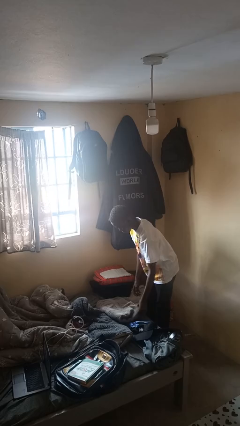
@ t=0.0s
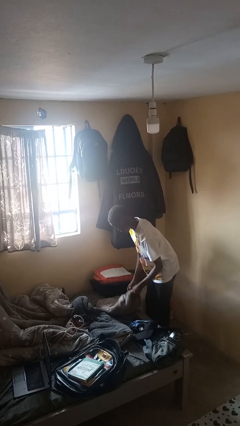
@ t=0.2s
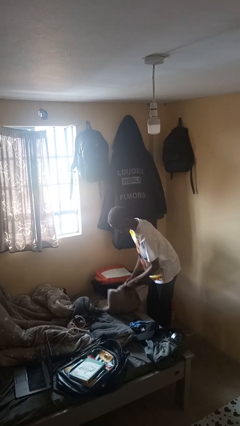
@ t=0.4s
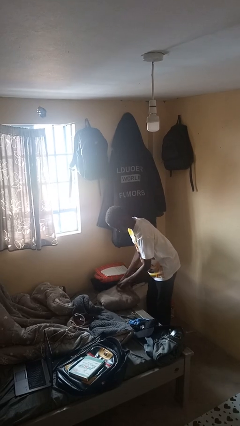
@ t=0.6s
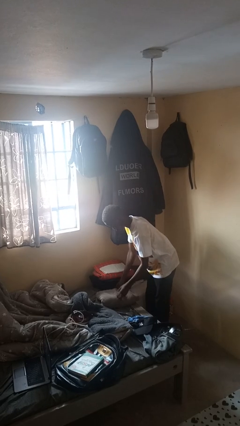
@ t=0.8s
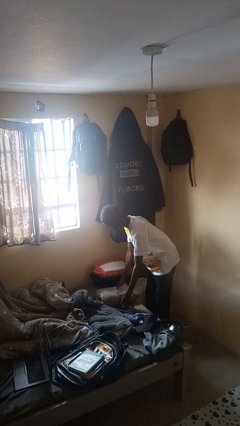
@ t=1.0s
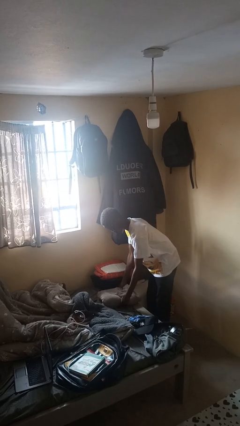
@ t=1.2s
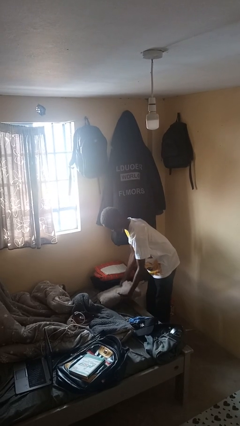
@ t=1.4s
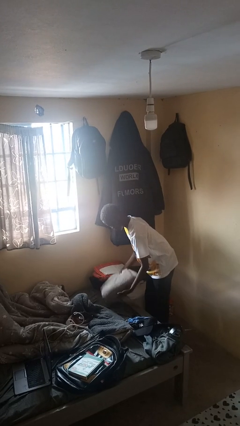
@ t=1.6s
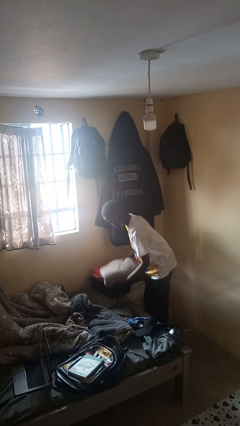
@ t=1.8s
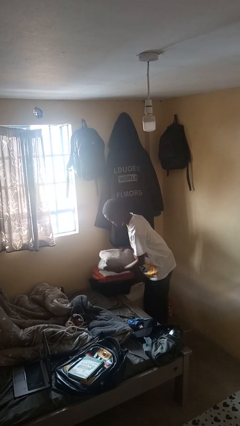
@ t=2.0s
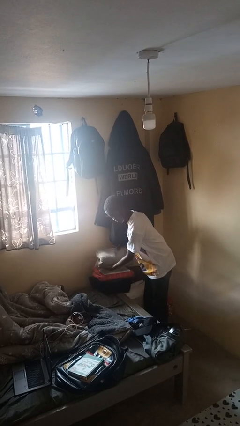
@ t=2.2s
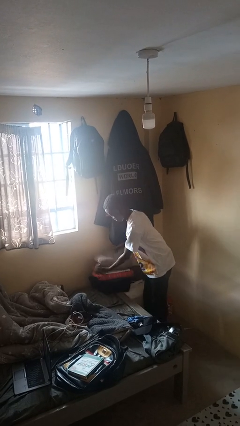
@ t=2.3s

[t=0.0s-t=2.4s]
person folds towel

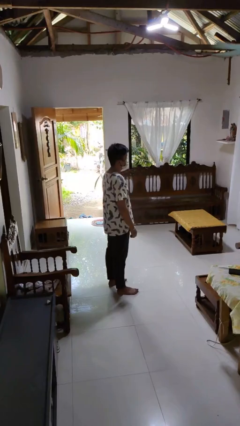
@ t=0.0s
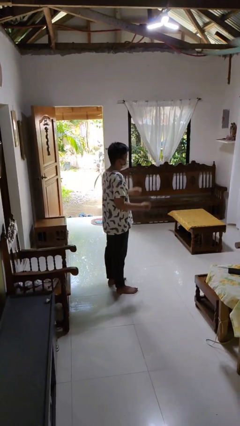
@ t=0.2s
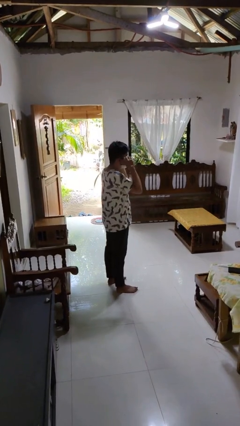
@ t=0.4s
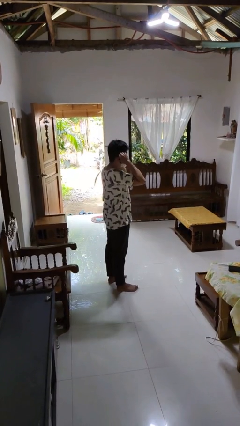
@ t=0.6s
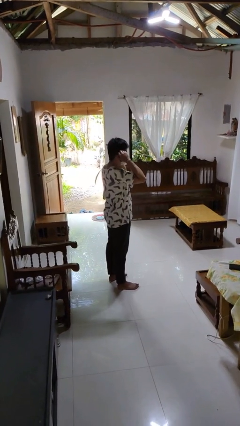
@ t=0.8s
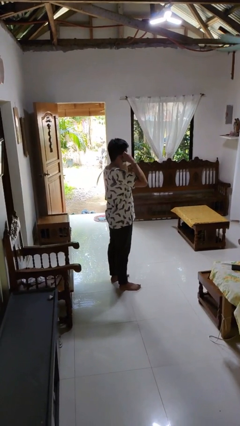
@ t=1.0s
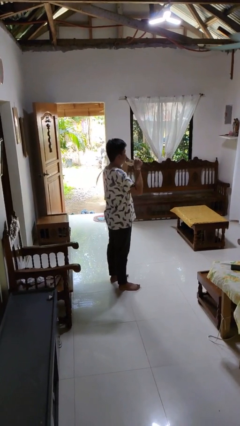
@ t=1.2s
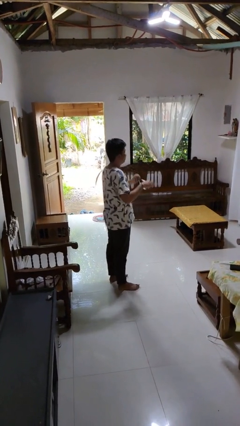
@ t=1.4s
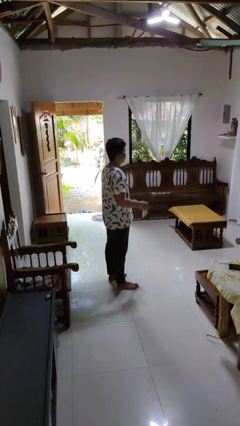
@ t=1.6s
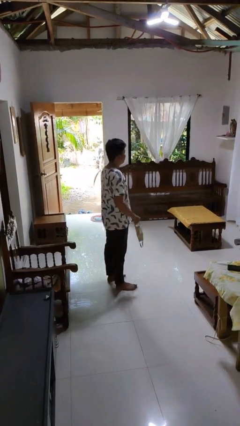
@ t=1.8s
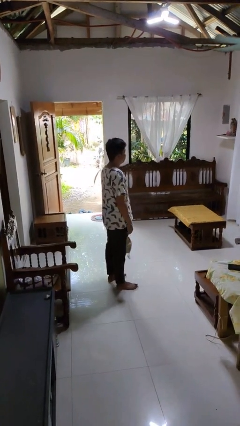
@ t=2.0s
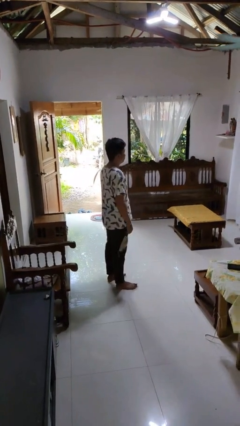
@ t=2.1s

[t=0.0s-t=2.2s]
person takes off facemask

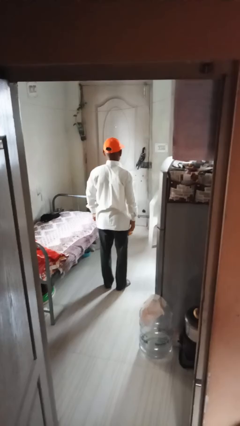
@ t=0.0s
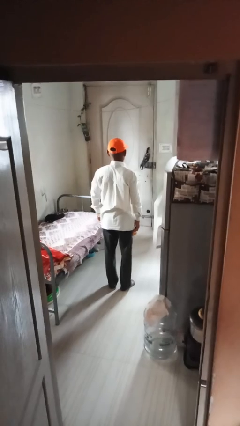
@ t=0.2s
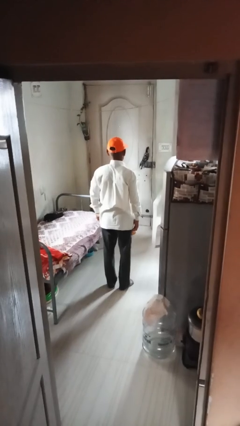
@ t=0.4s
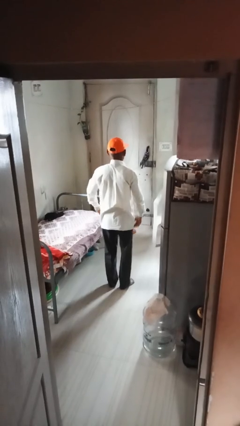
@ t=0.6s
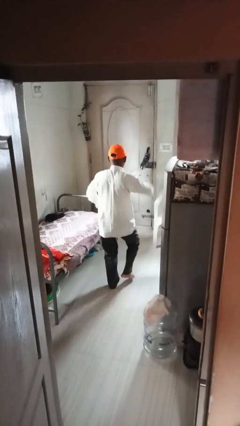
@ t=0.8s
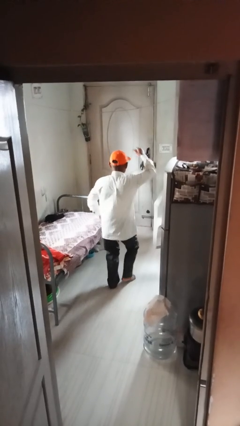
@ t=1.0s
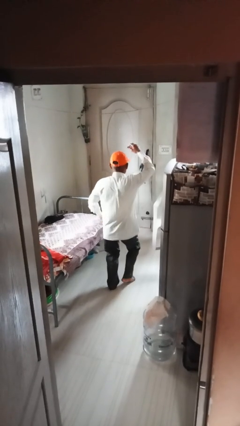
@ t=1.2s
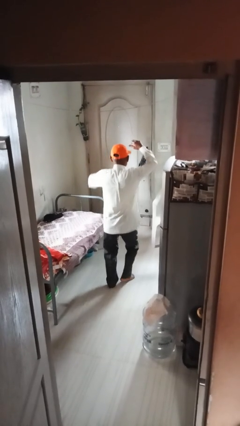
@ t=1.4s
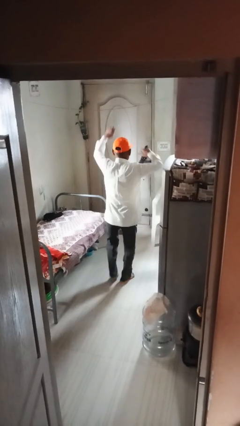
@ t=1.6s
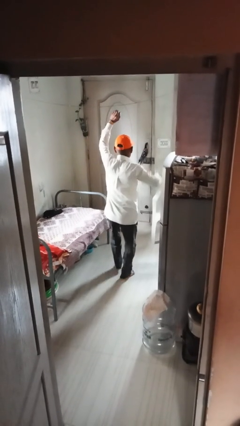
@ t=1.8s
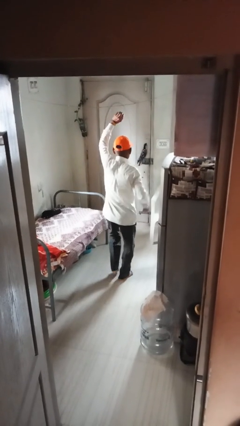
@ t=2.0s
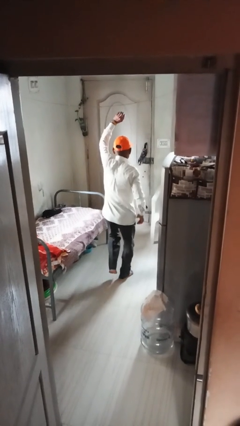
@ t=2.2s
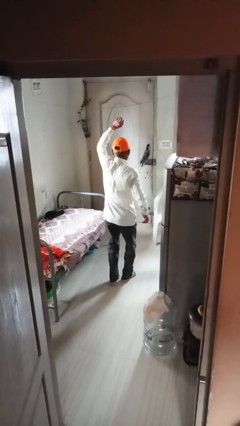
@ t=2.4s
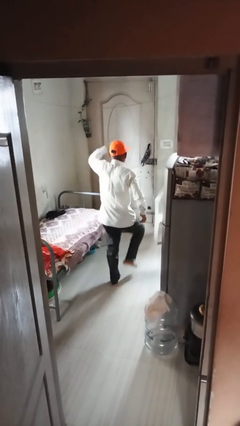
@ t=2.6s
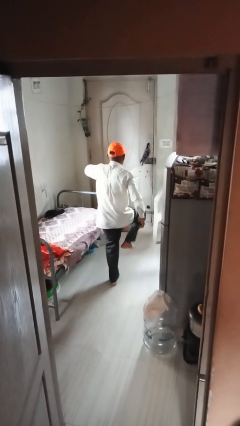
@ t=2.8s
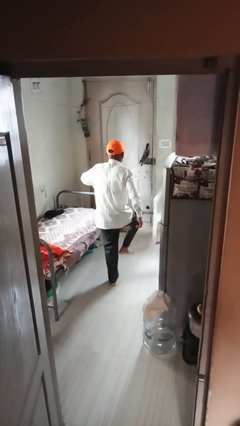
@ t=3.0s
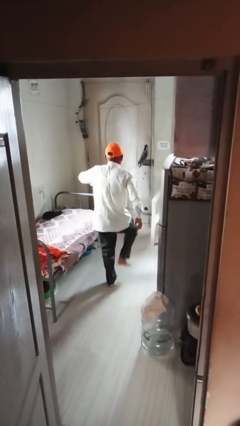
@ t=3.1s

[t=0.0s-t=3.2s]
person dances in place

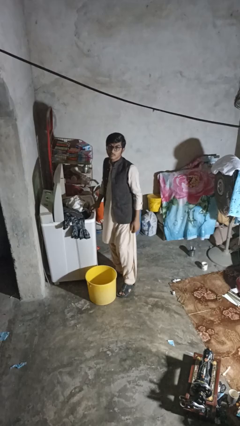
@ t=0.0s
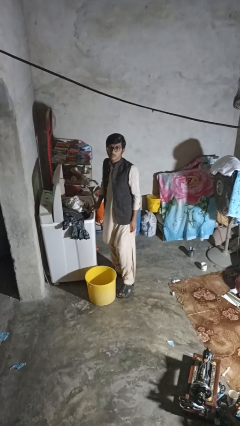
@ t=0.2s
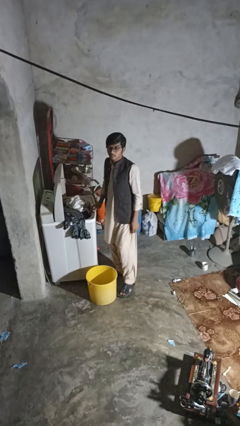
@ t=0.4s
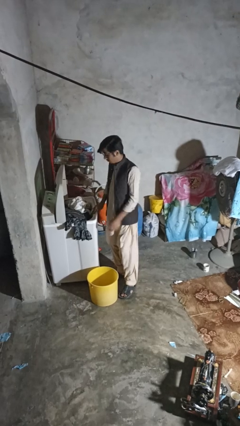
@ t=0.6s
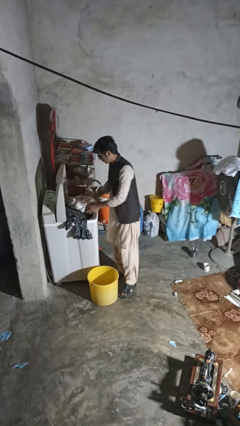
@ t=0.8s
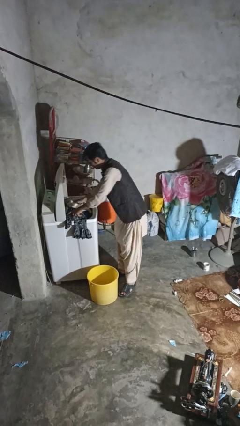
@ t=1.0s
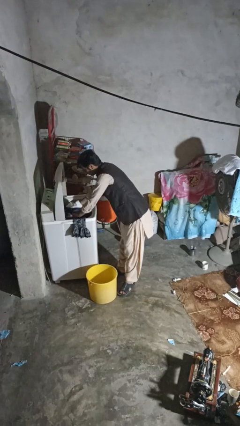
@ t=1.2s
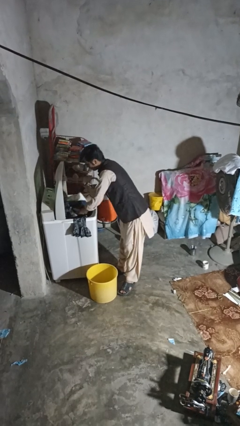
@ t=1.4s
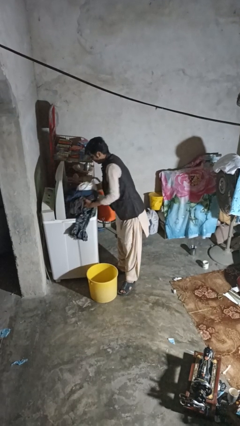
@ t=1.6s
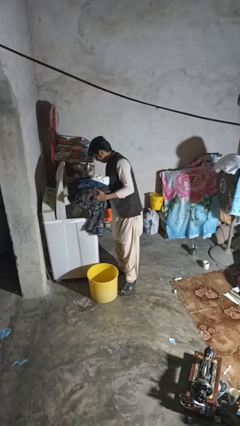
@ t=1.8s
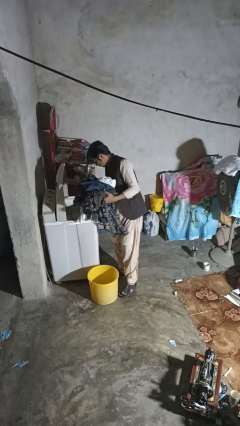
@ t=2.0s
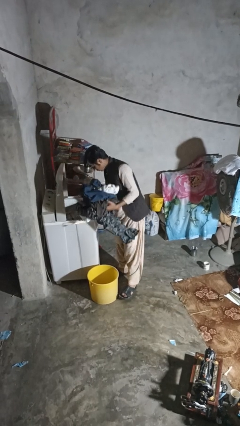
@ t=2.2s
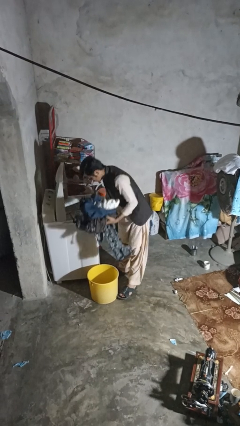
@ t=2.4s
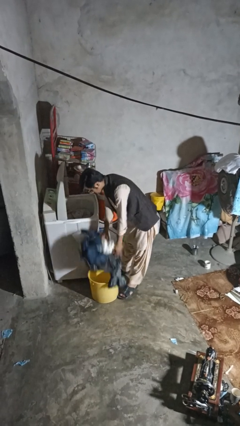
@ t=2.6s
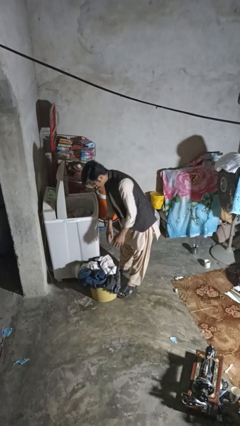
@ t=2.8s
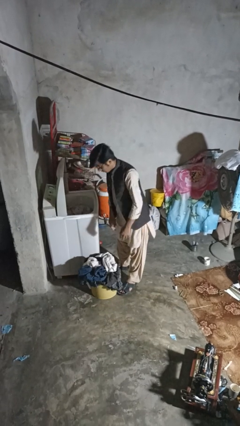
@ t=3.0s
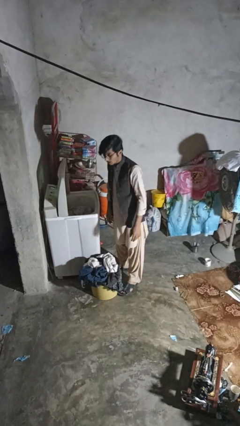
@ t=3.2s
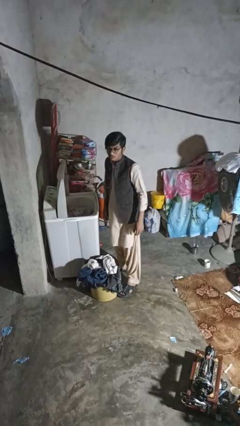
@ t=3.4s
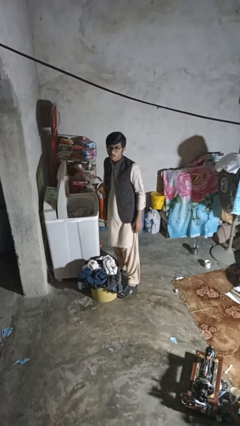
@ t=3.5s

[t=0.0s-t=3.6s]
person unloads dryer

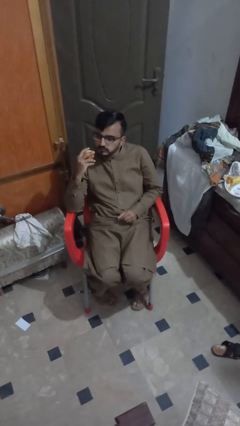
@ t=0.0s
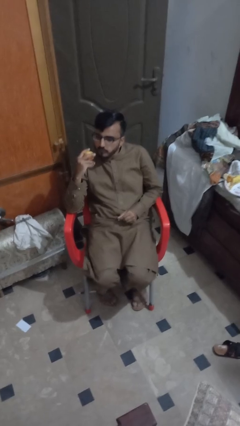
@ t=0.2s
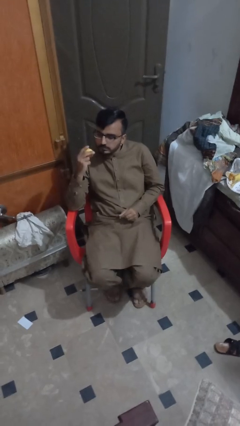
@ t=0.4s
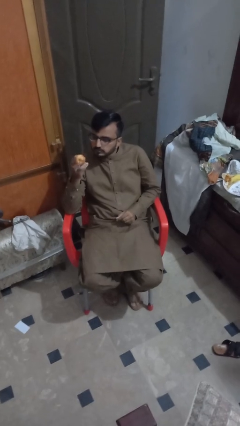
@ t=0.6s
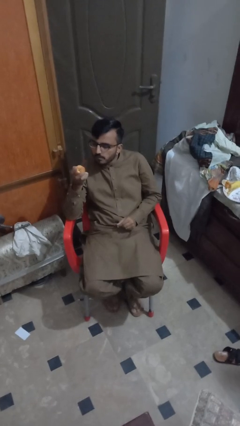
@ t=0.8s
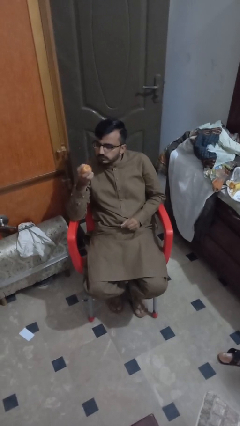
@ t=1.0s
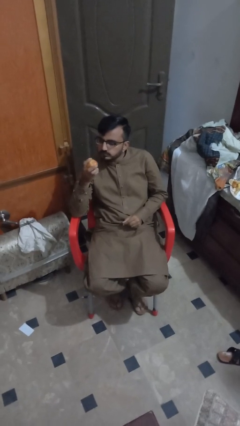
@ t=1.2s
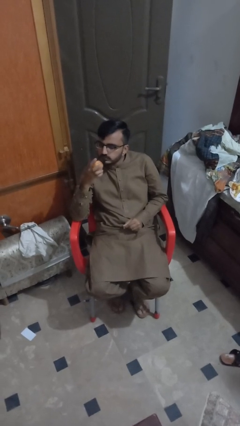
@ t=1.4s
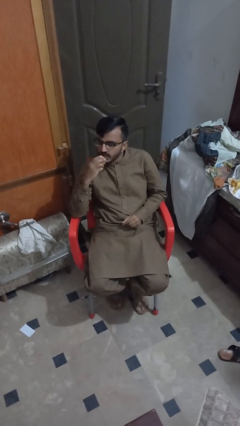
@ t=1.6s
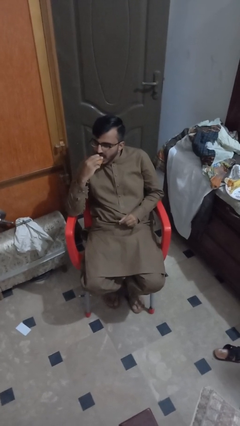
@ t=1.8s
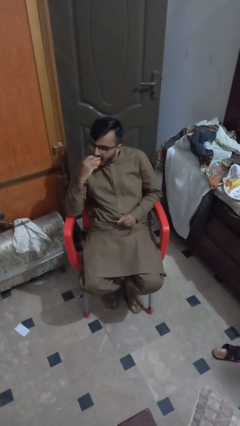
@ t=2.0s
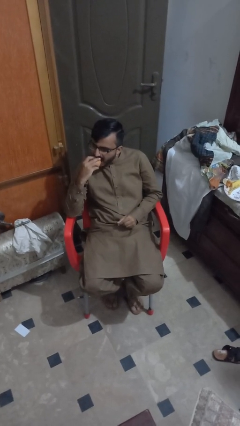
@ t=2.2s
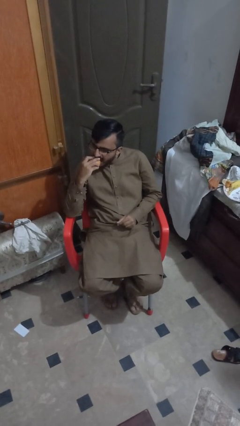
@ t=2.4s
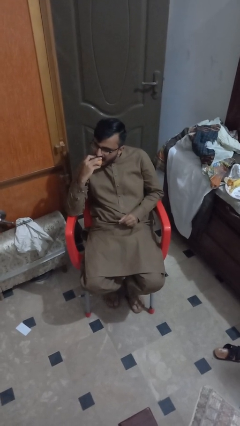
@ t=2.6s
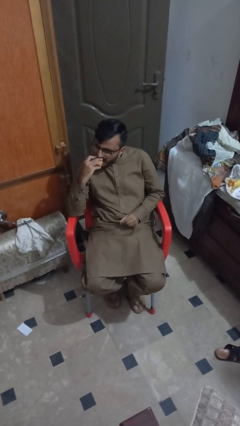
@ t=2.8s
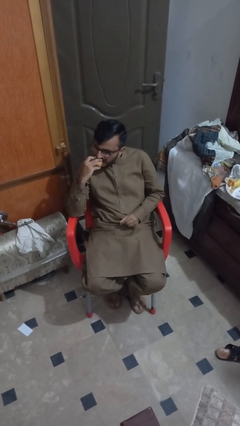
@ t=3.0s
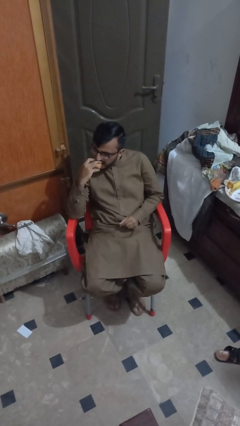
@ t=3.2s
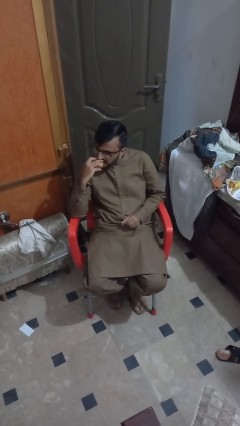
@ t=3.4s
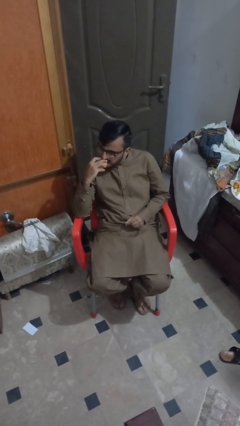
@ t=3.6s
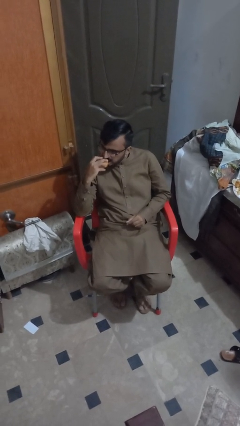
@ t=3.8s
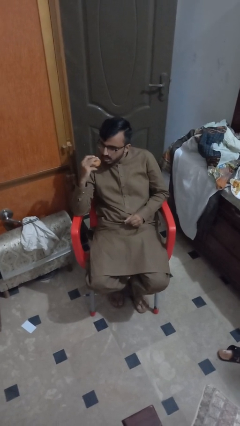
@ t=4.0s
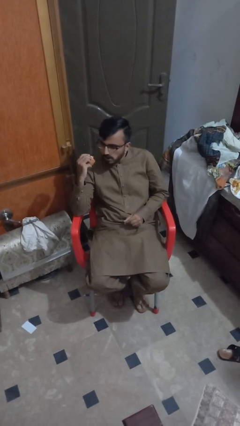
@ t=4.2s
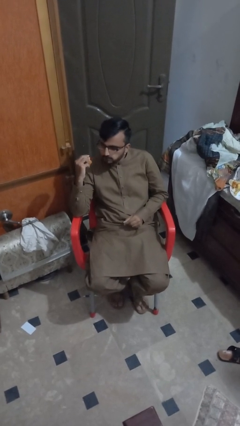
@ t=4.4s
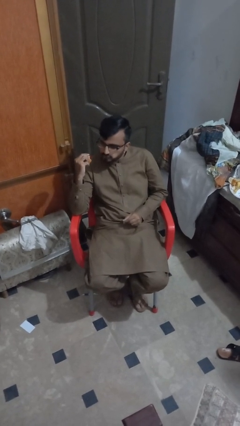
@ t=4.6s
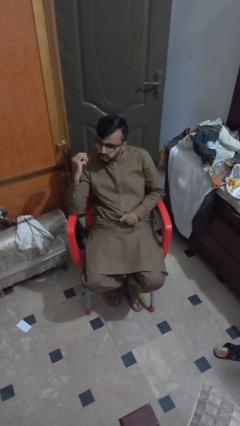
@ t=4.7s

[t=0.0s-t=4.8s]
person eats apple

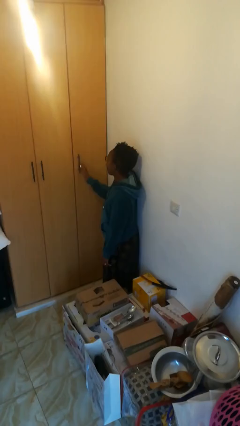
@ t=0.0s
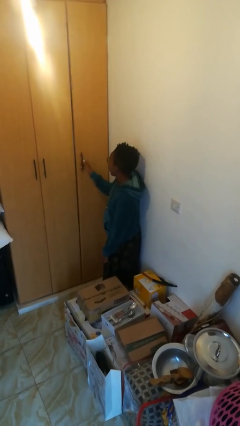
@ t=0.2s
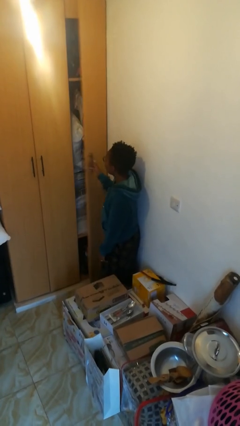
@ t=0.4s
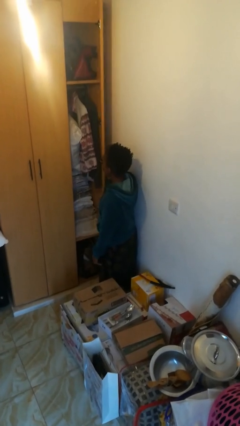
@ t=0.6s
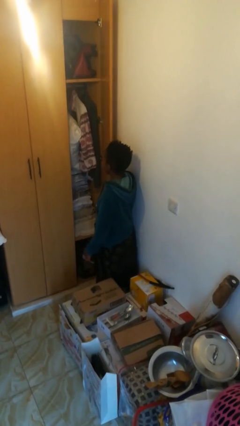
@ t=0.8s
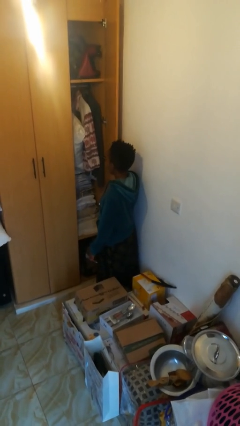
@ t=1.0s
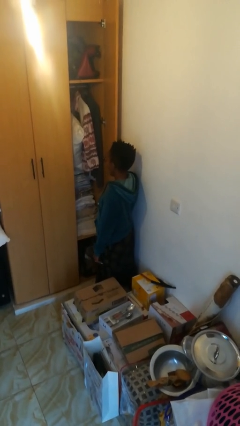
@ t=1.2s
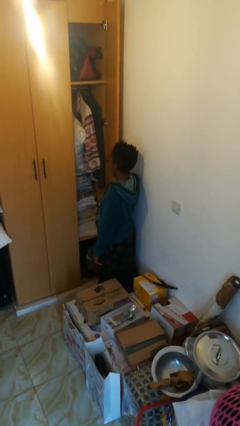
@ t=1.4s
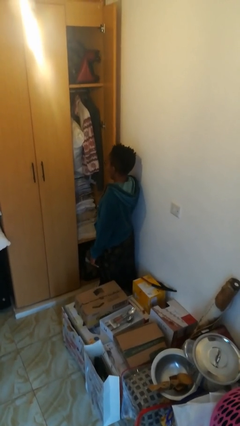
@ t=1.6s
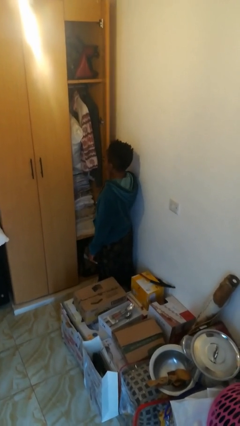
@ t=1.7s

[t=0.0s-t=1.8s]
person opens closet door
